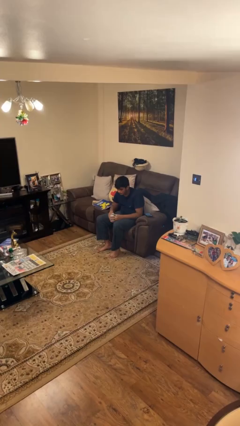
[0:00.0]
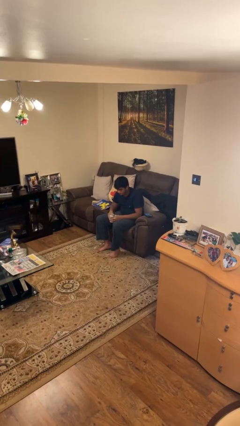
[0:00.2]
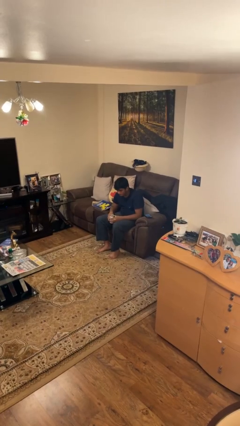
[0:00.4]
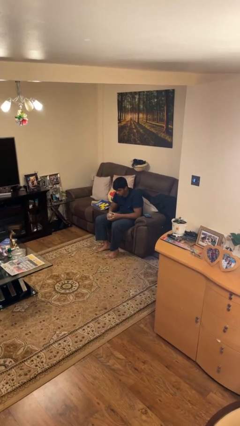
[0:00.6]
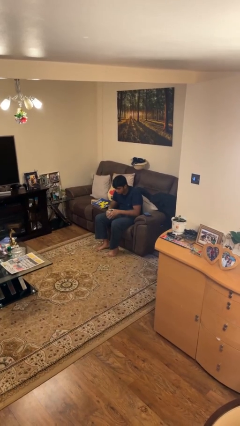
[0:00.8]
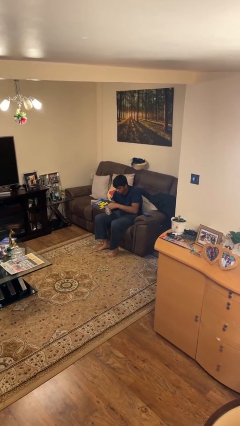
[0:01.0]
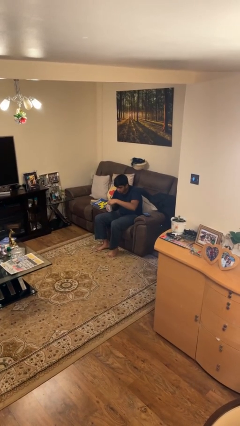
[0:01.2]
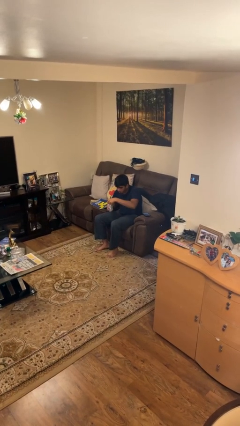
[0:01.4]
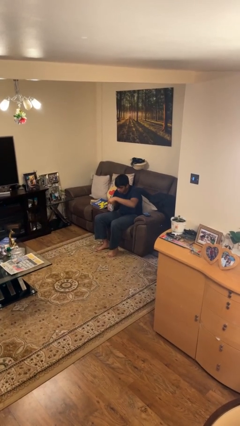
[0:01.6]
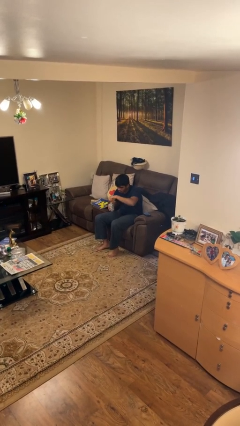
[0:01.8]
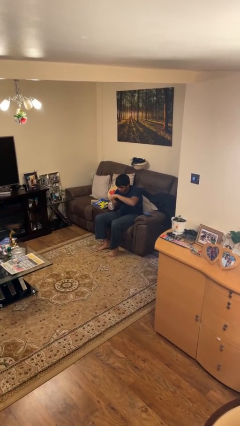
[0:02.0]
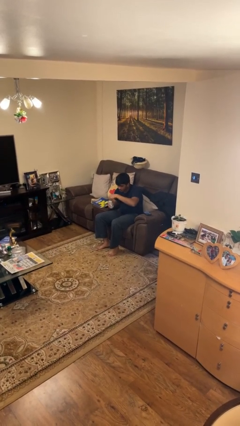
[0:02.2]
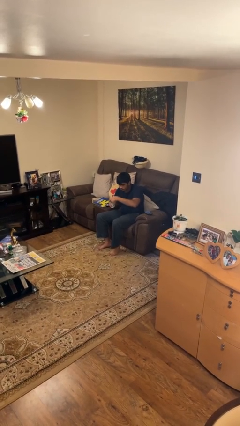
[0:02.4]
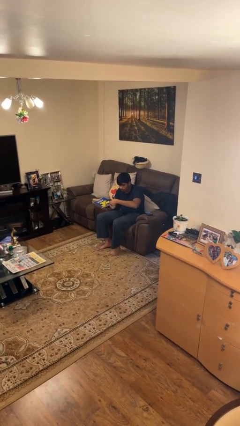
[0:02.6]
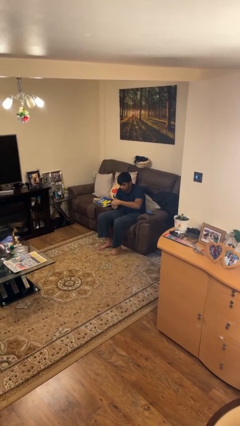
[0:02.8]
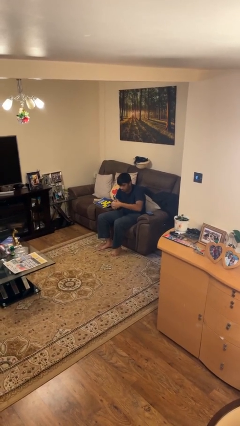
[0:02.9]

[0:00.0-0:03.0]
person opens beverage can

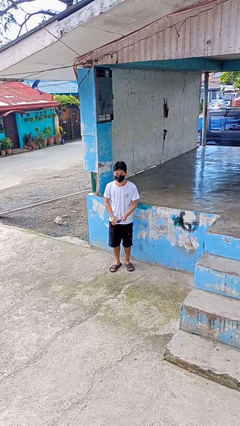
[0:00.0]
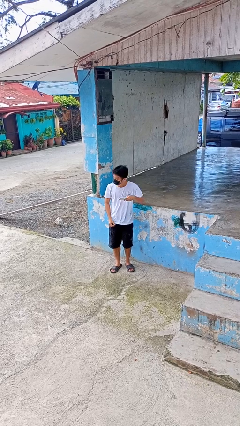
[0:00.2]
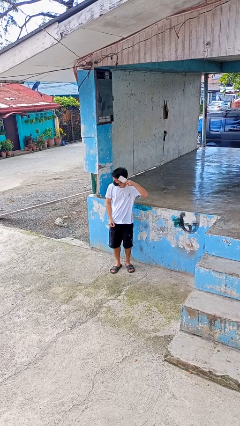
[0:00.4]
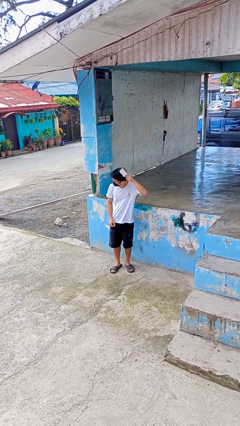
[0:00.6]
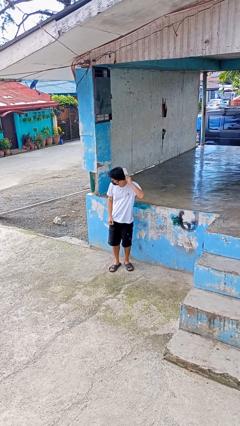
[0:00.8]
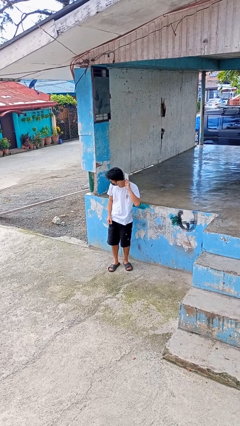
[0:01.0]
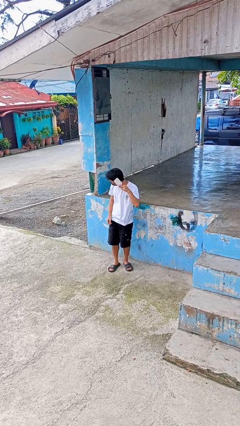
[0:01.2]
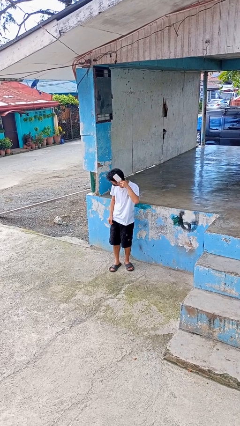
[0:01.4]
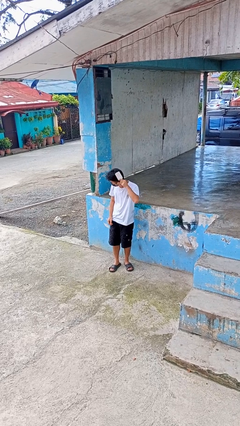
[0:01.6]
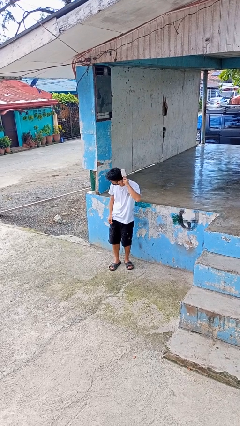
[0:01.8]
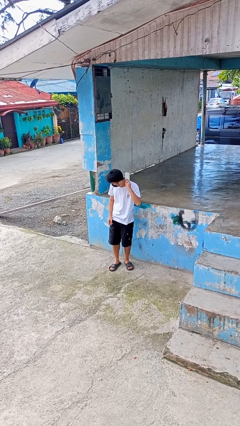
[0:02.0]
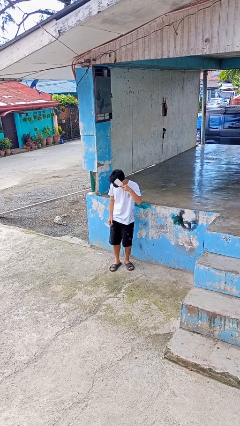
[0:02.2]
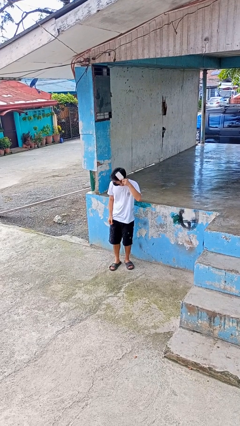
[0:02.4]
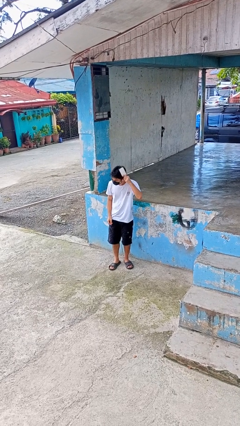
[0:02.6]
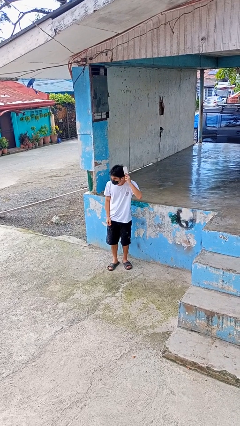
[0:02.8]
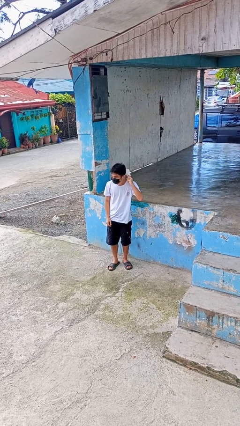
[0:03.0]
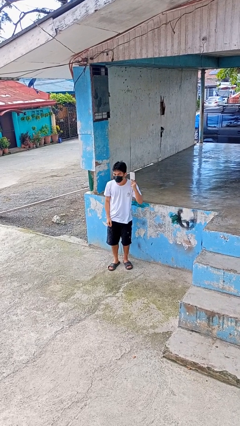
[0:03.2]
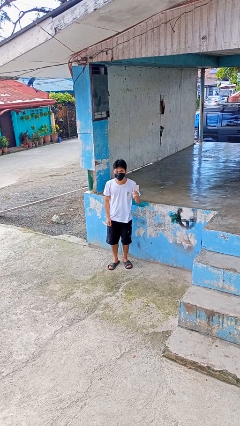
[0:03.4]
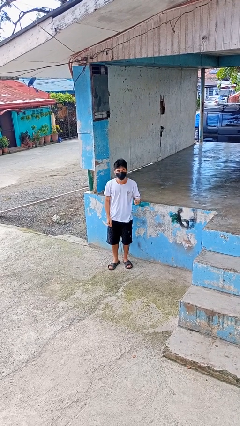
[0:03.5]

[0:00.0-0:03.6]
person brushes hair

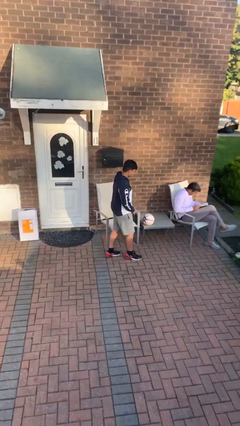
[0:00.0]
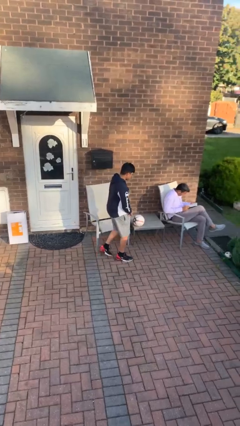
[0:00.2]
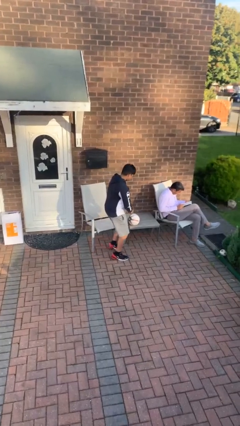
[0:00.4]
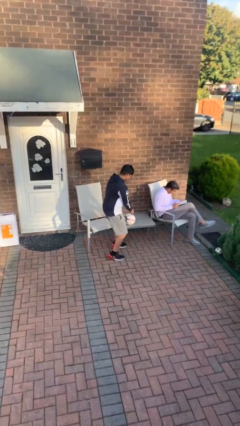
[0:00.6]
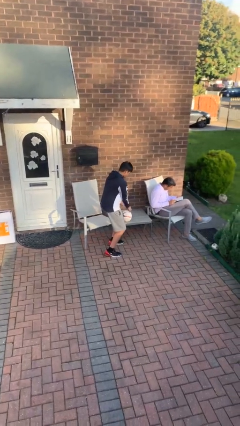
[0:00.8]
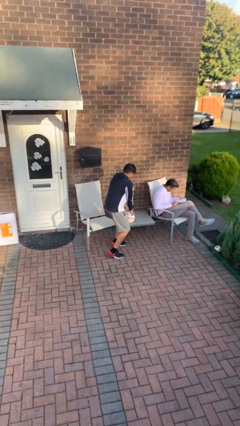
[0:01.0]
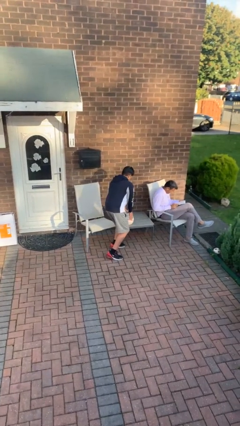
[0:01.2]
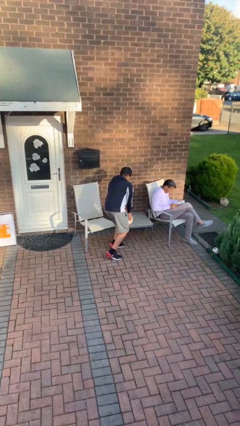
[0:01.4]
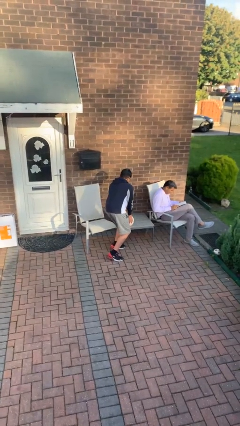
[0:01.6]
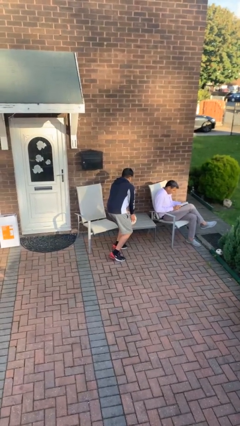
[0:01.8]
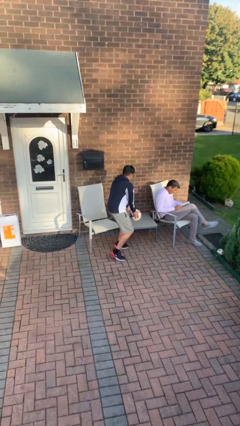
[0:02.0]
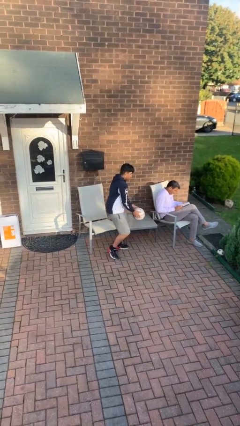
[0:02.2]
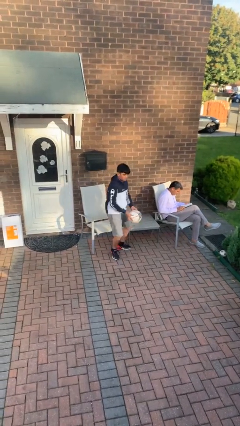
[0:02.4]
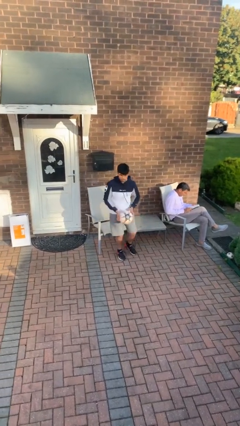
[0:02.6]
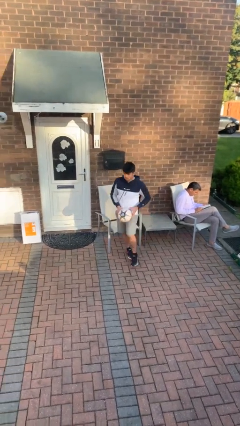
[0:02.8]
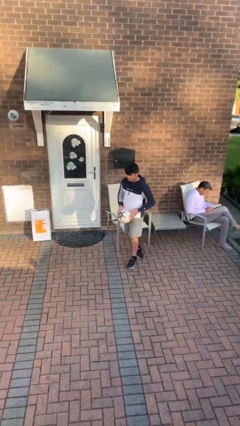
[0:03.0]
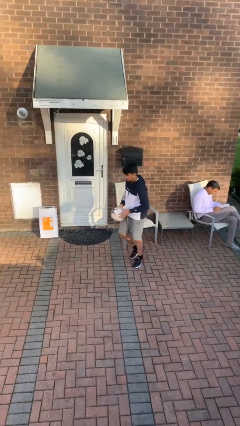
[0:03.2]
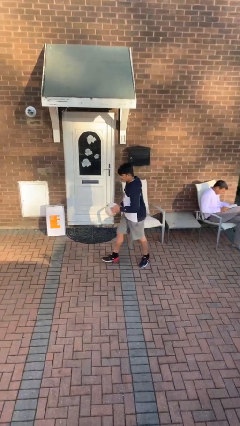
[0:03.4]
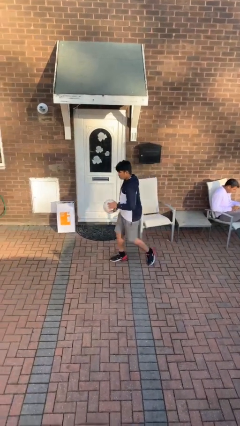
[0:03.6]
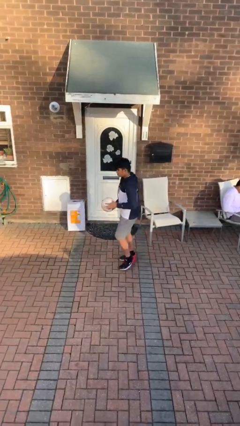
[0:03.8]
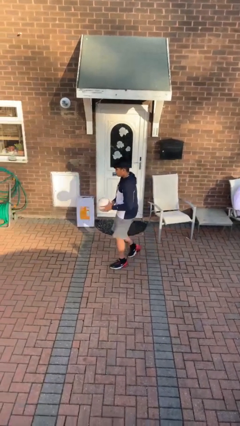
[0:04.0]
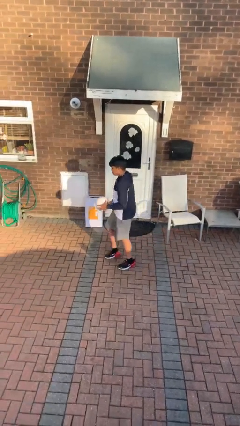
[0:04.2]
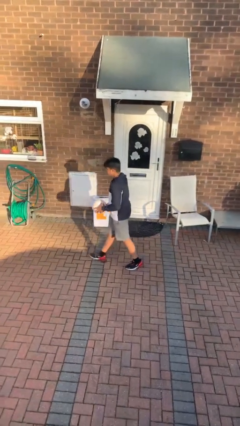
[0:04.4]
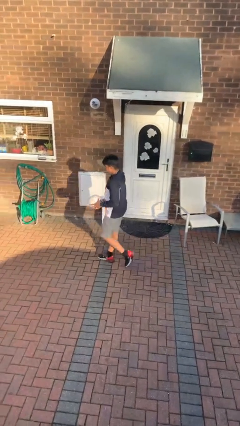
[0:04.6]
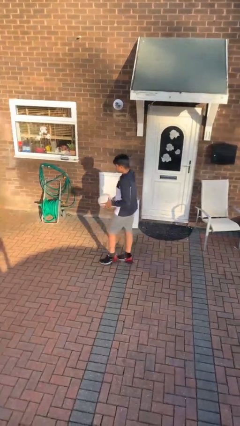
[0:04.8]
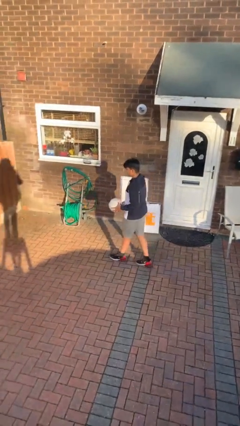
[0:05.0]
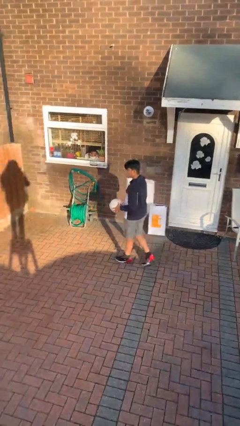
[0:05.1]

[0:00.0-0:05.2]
person steals object from person

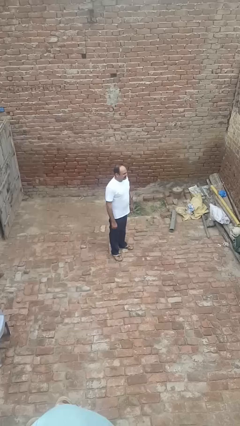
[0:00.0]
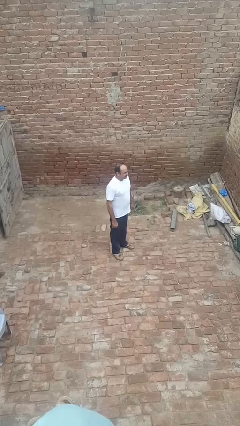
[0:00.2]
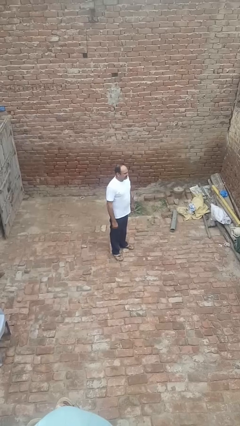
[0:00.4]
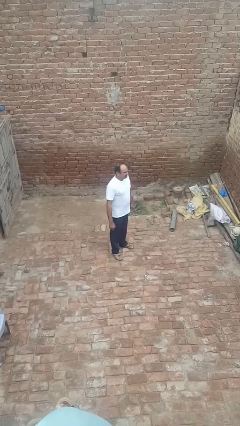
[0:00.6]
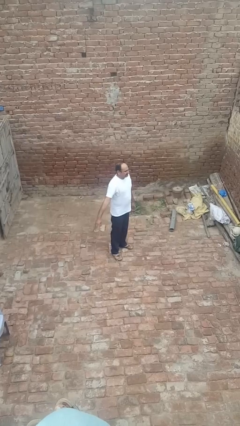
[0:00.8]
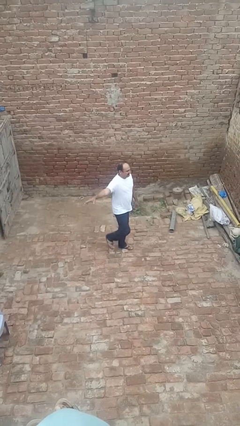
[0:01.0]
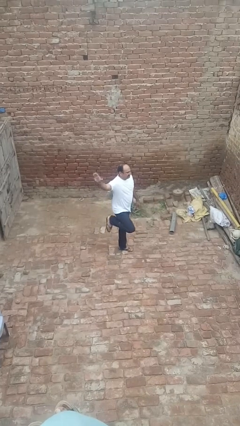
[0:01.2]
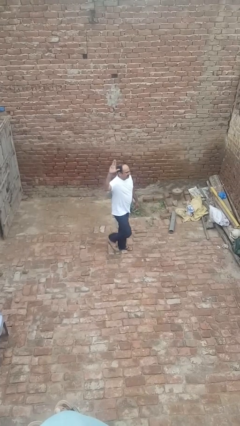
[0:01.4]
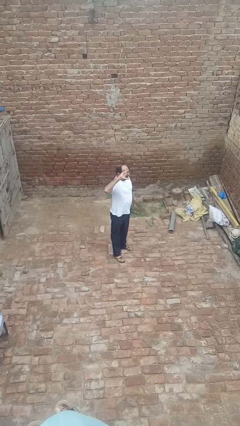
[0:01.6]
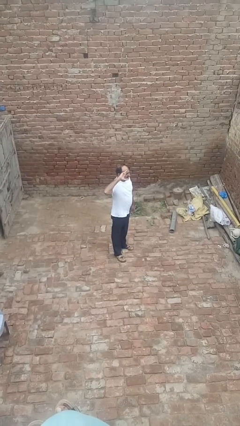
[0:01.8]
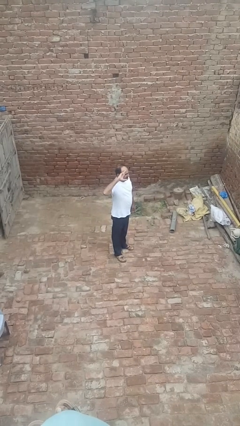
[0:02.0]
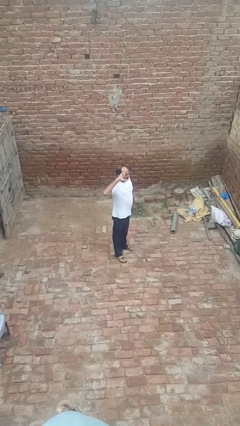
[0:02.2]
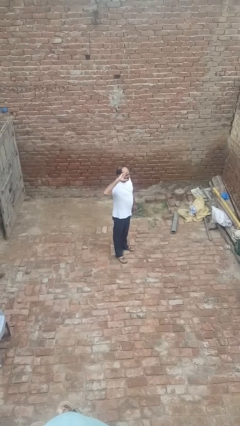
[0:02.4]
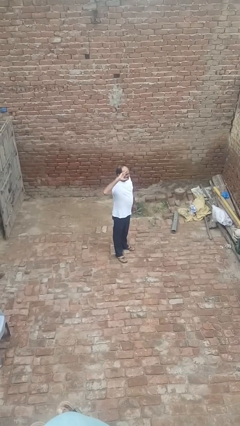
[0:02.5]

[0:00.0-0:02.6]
person salutes

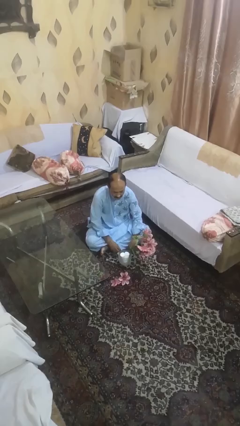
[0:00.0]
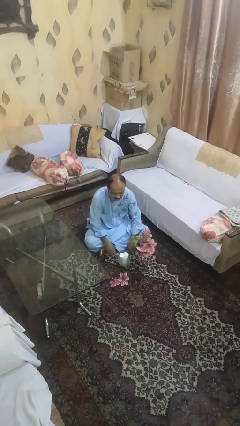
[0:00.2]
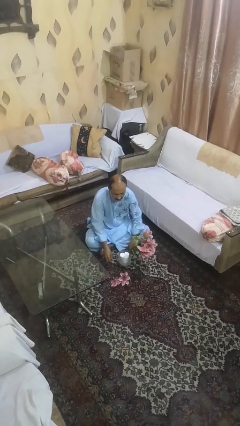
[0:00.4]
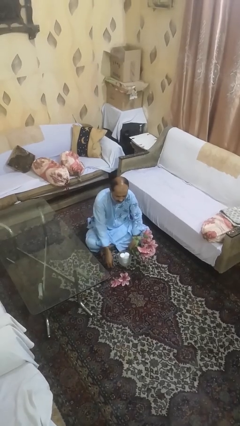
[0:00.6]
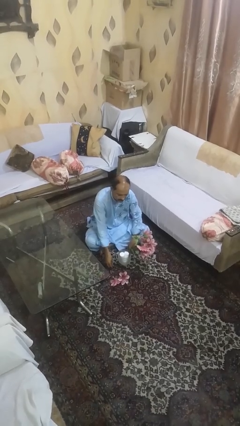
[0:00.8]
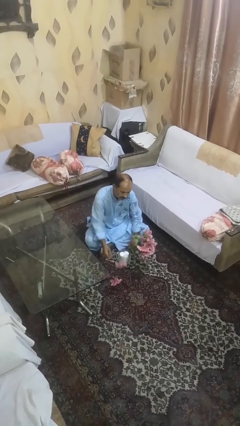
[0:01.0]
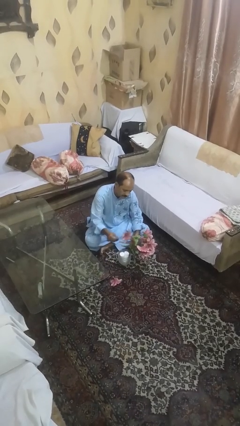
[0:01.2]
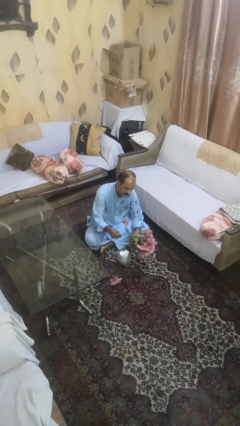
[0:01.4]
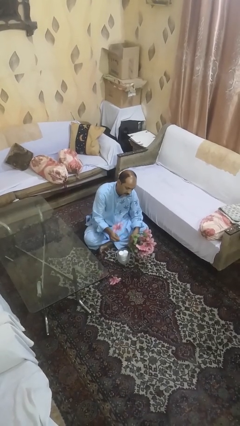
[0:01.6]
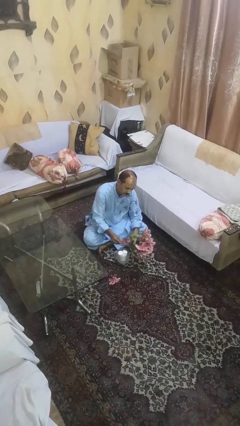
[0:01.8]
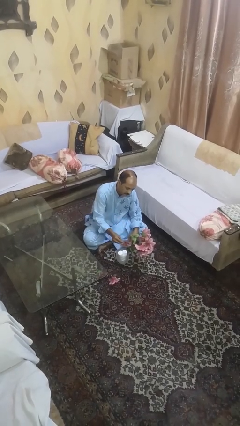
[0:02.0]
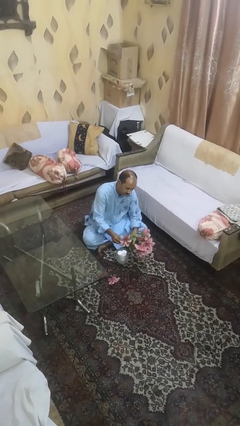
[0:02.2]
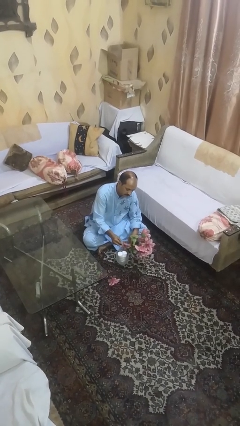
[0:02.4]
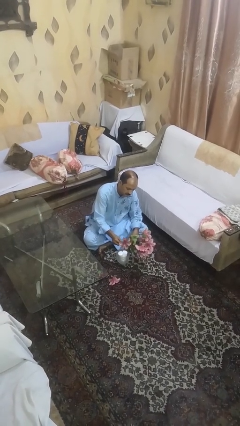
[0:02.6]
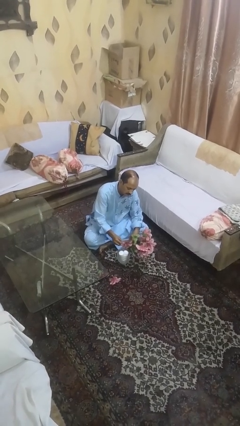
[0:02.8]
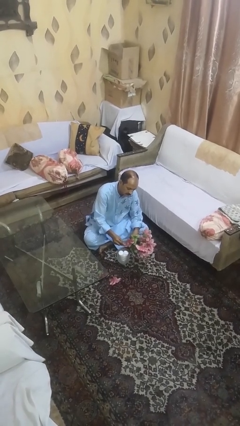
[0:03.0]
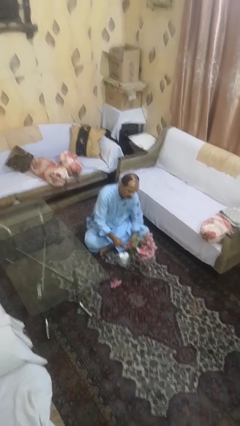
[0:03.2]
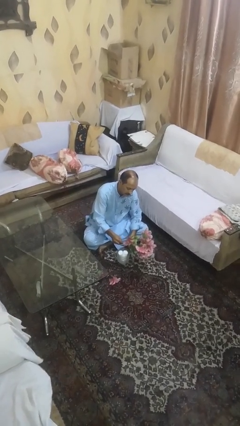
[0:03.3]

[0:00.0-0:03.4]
person arranges flowers in vase
